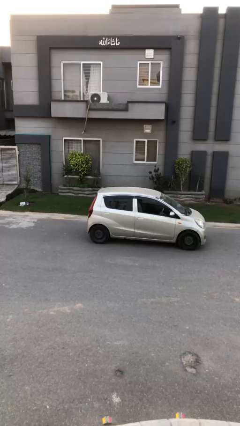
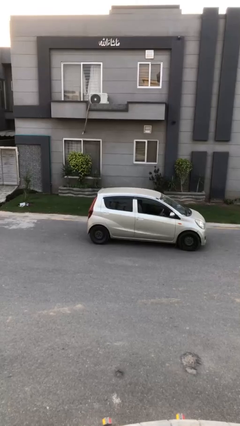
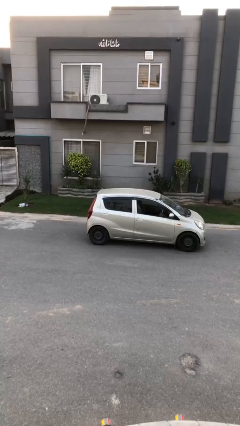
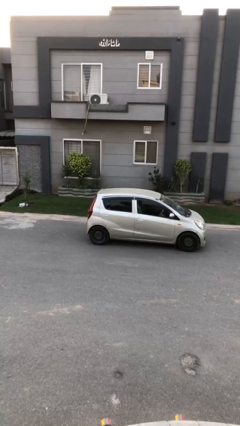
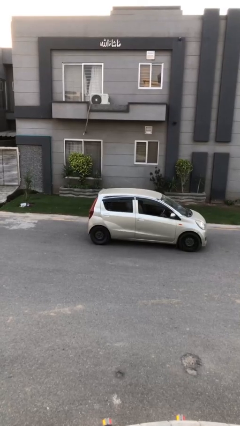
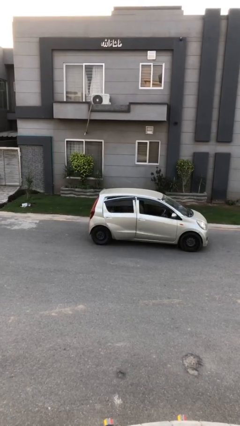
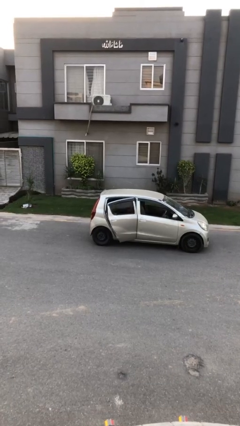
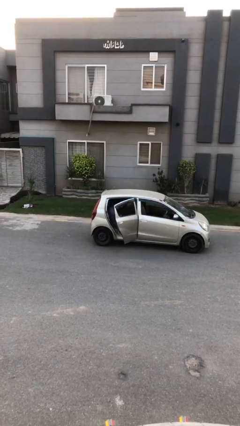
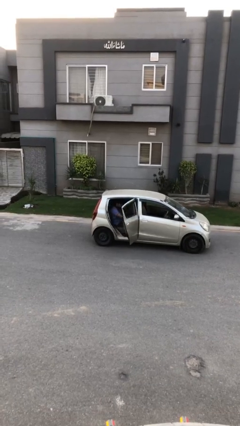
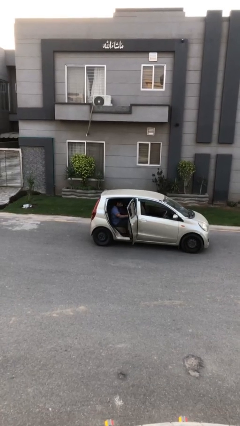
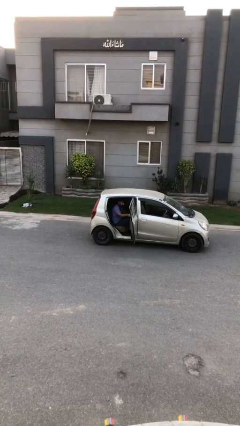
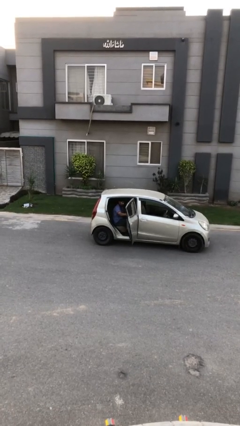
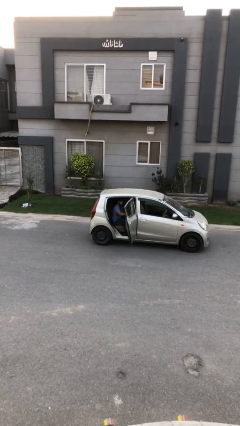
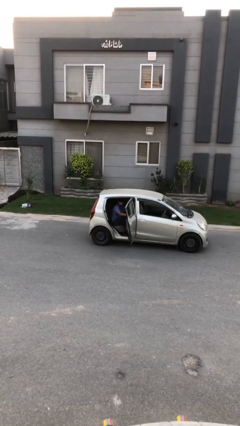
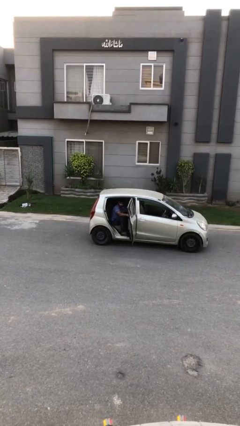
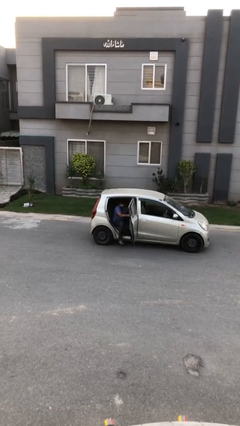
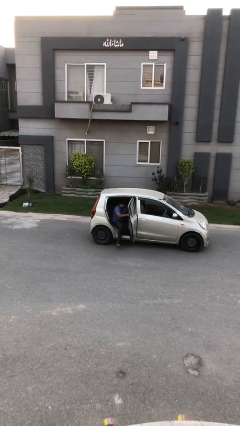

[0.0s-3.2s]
person opens car door

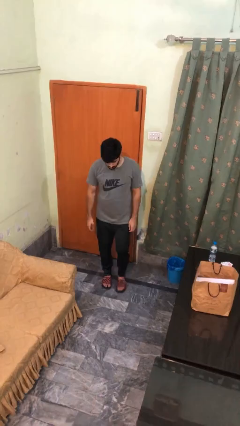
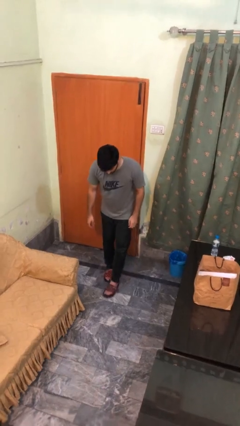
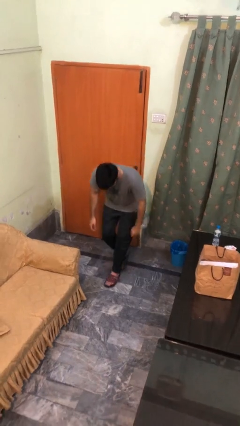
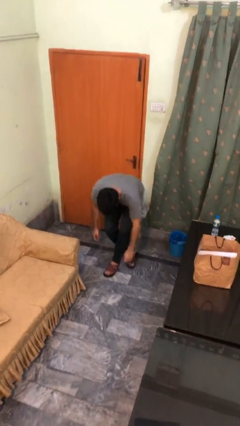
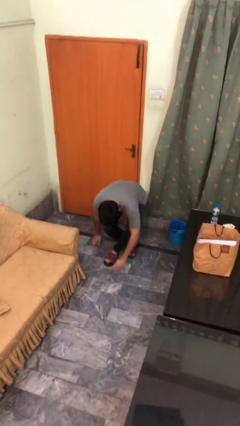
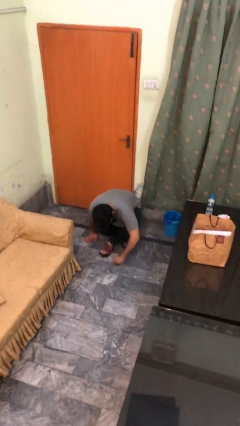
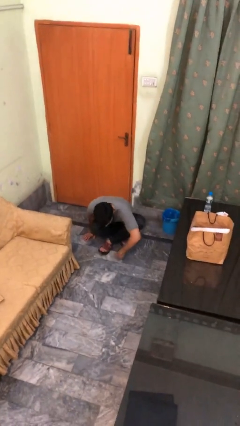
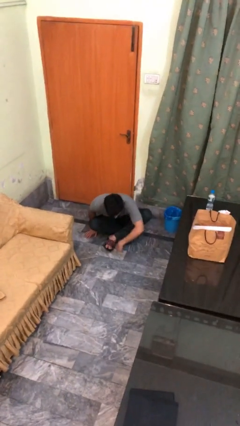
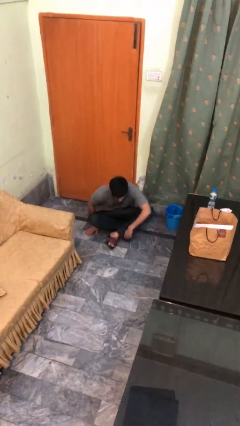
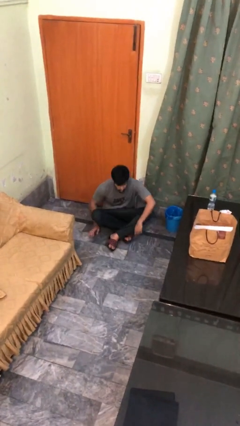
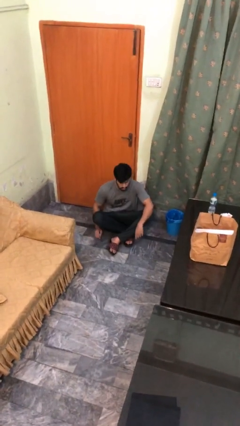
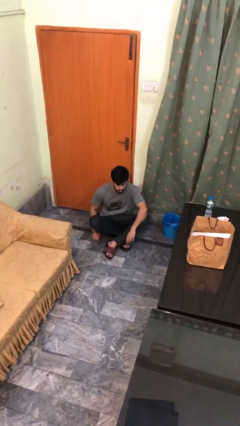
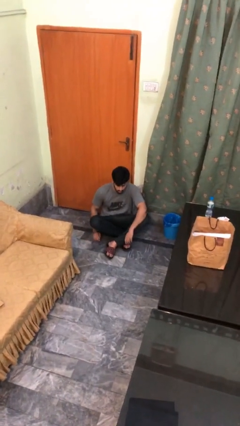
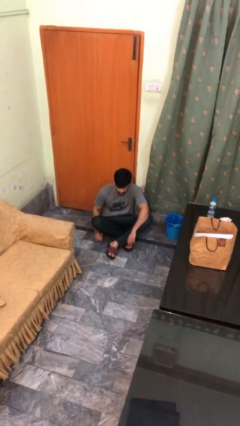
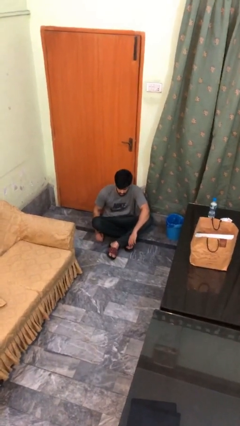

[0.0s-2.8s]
person sits crisscross

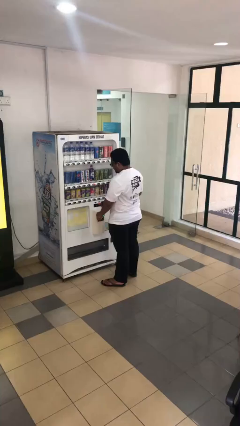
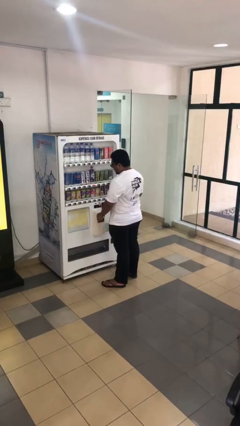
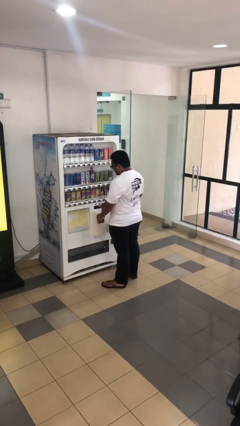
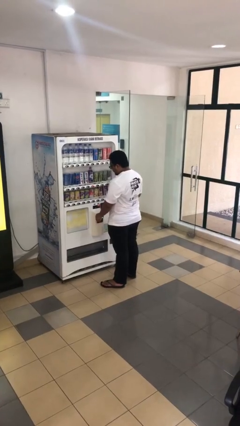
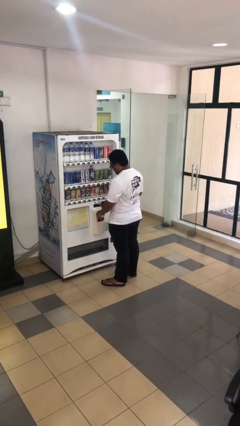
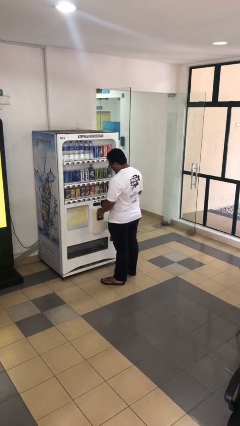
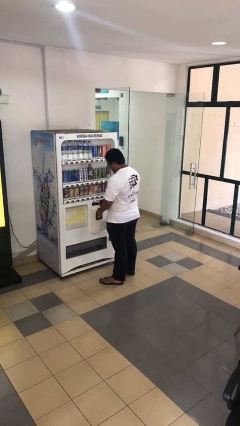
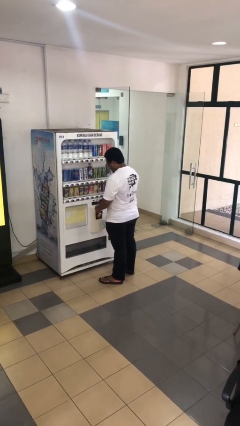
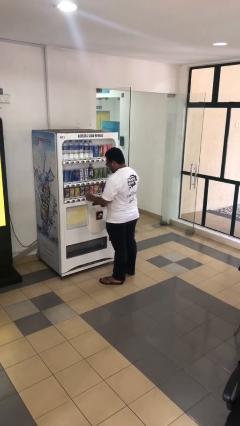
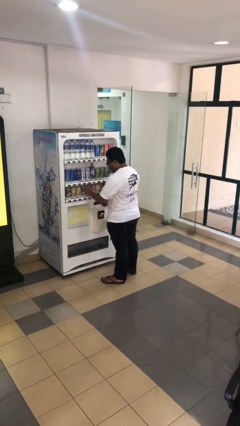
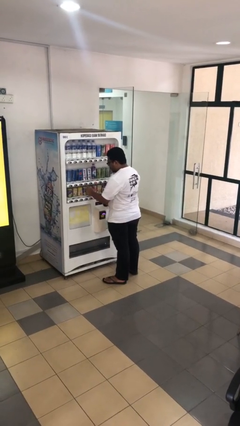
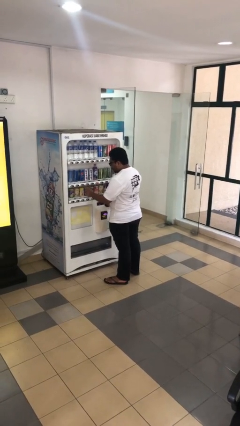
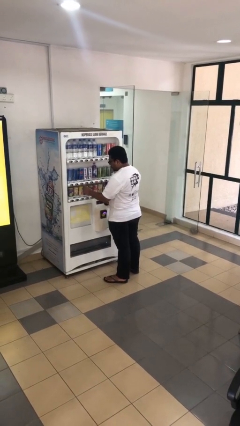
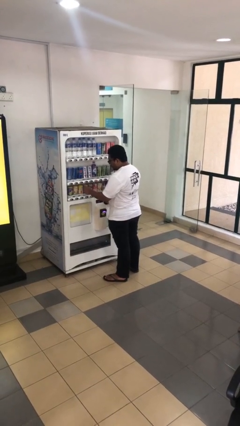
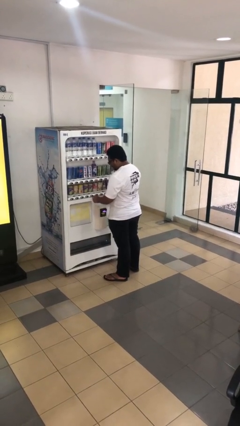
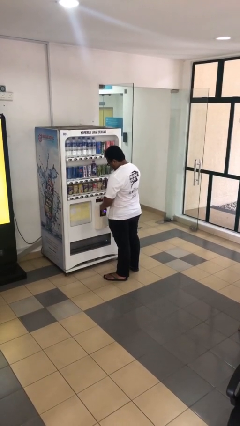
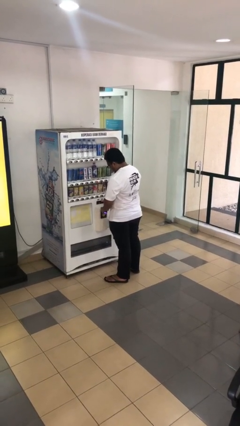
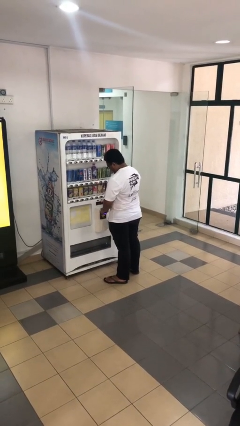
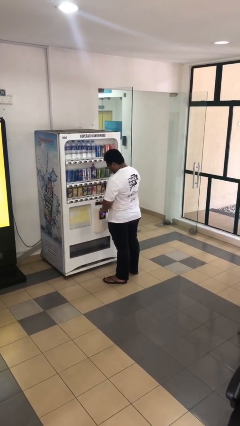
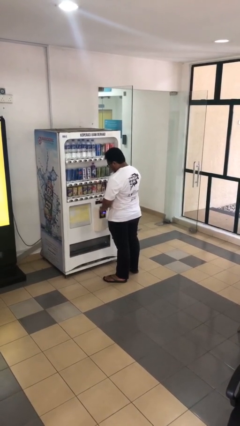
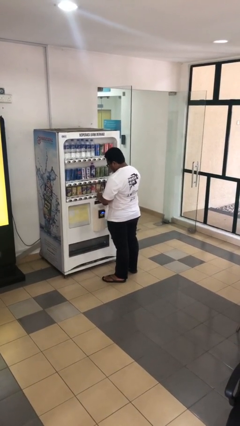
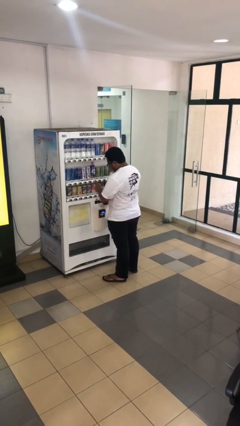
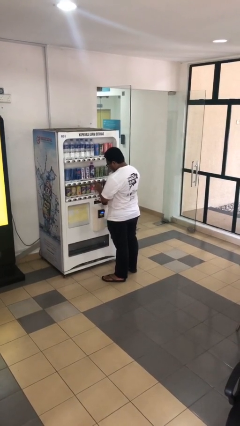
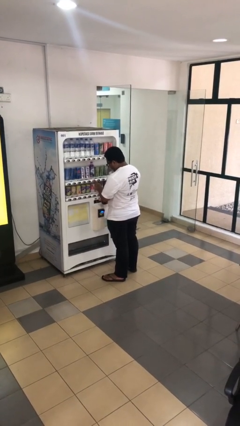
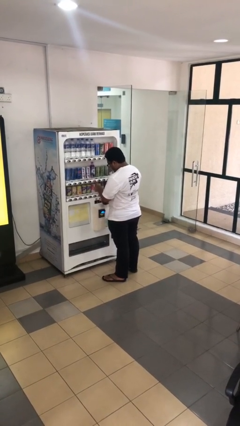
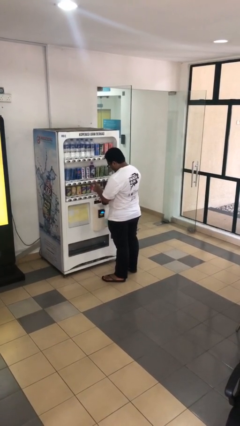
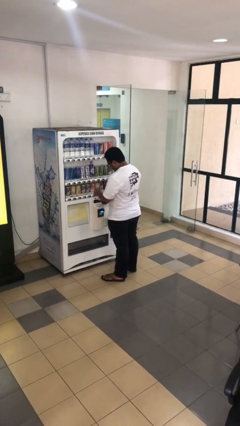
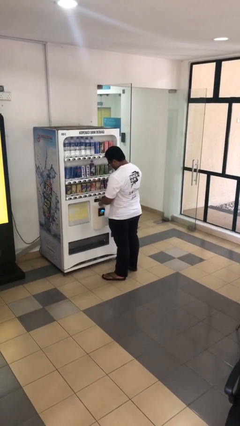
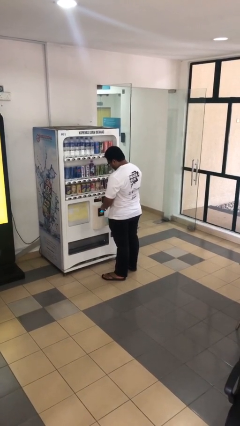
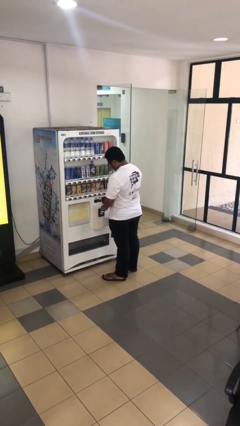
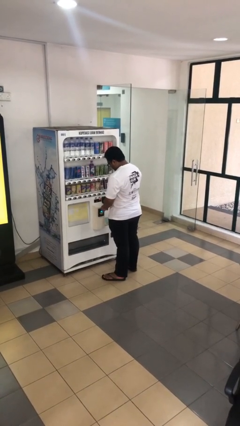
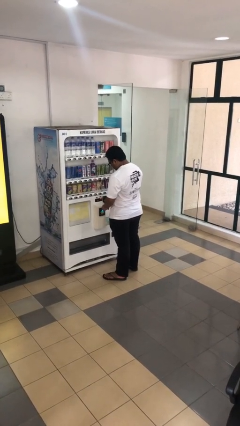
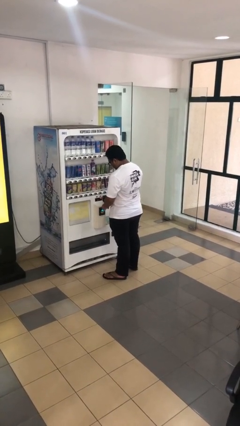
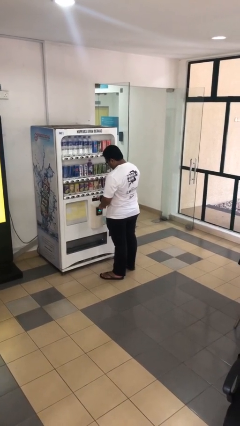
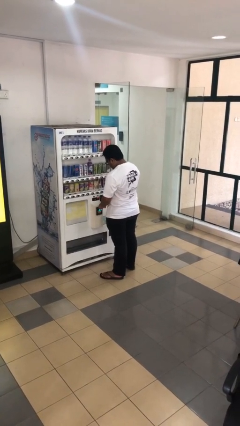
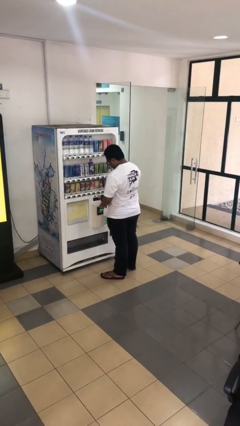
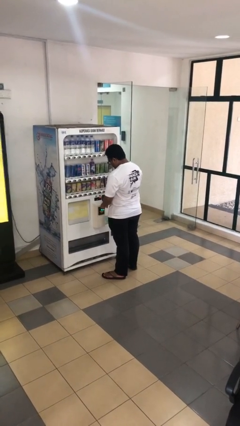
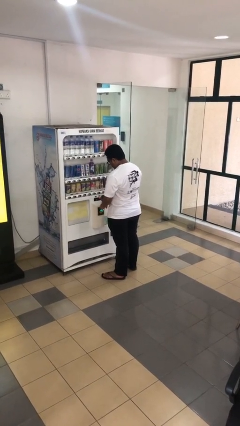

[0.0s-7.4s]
person purchases from machine

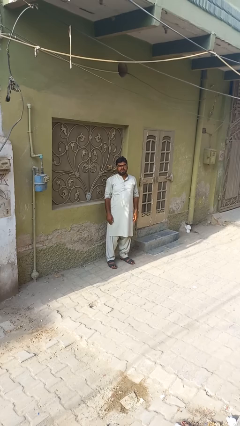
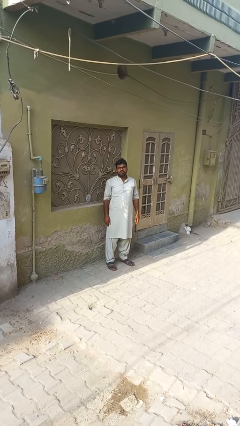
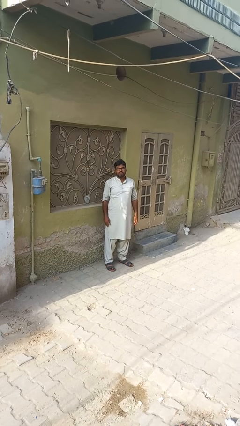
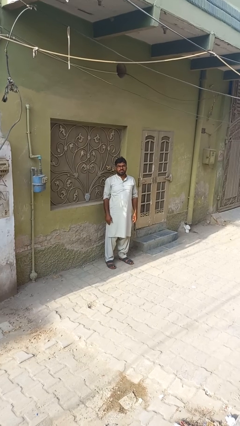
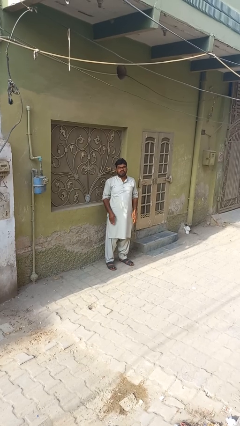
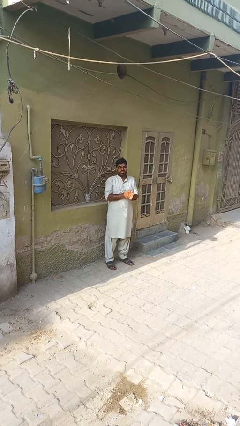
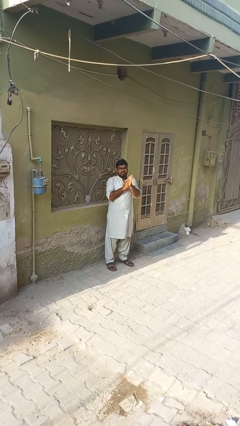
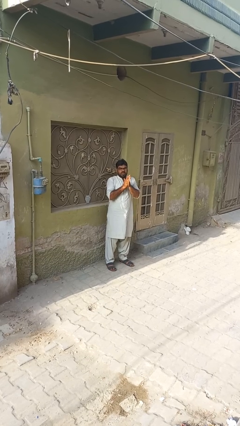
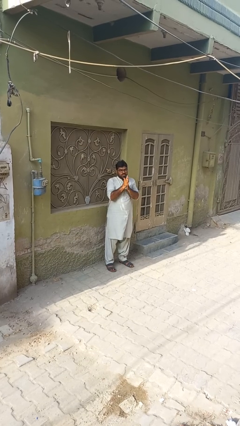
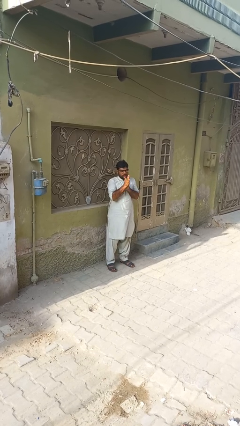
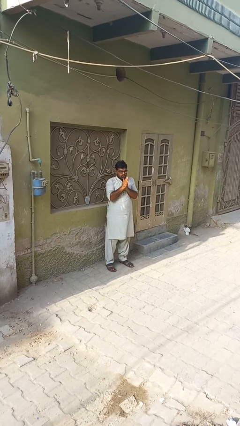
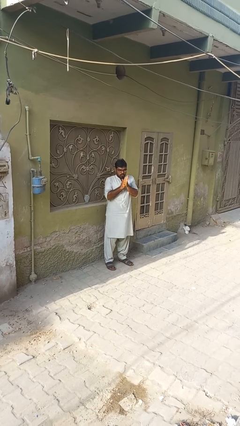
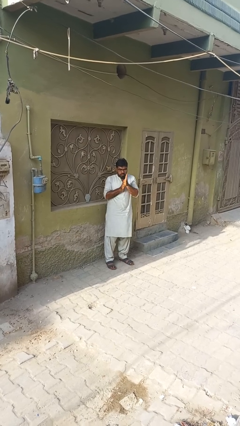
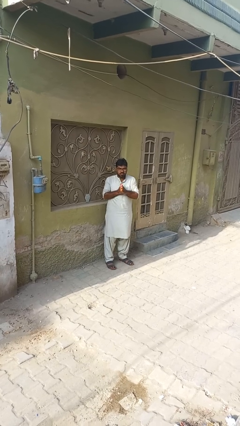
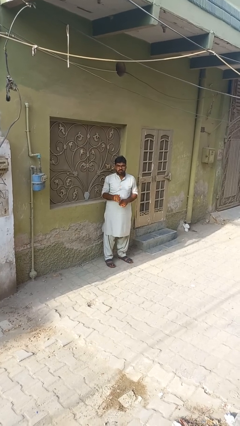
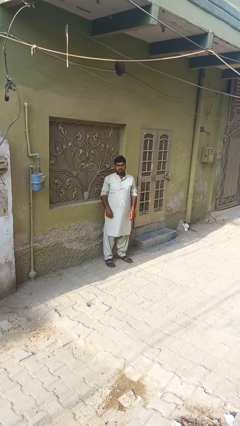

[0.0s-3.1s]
person blows into hands

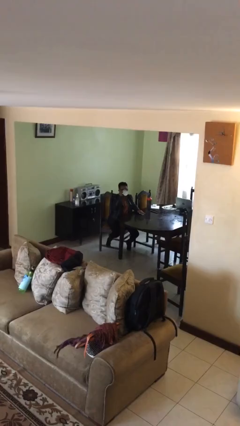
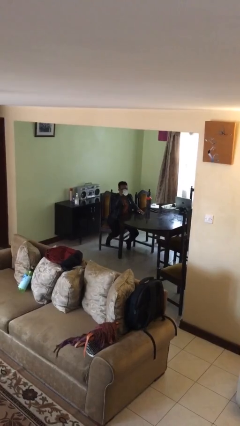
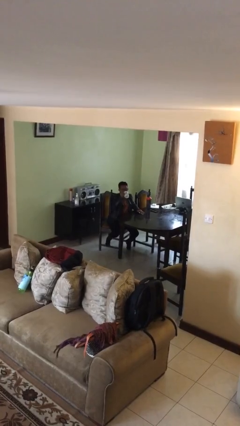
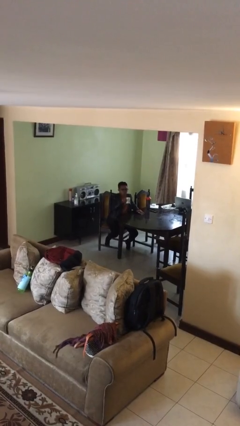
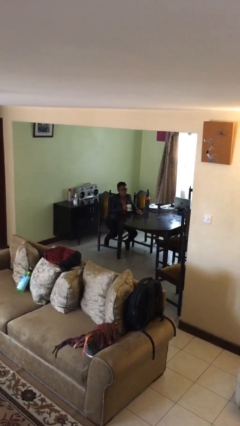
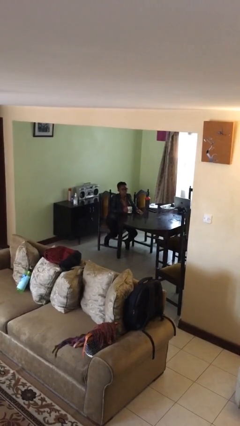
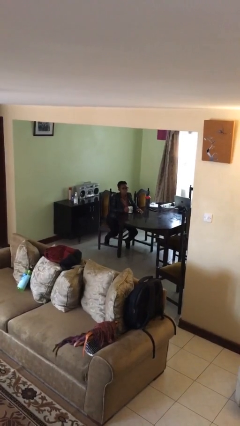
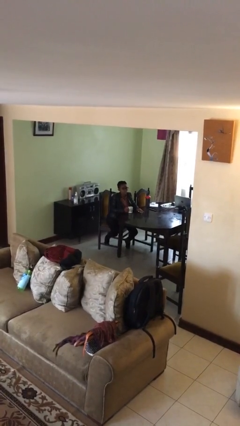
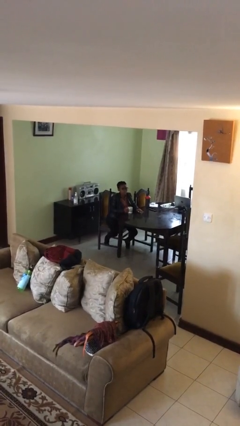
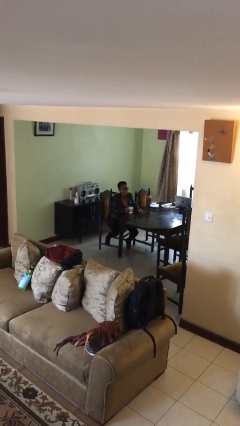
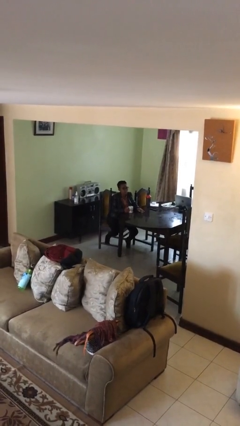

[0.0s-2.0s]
person puts down object on table
